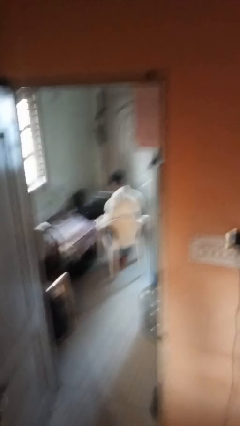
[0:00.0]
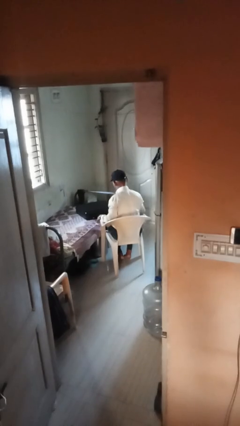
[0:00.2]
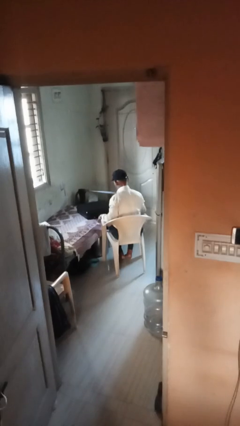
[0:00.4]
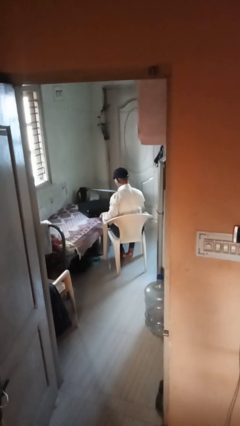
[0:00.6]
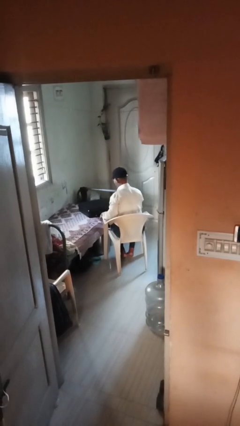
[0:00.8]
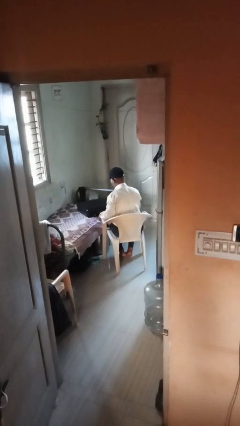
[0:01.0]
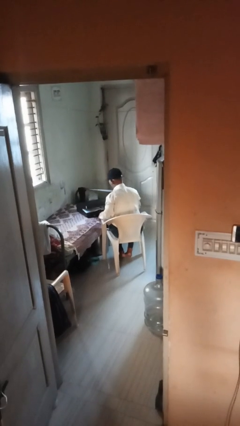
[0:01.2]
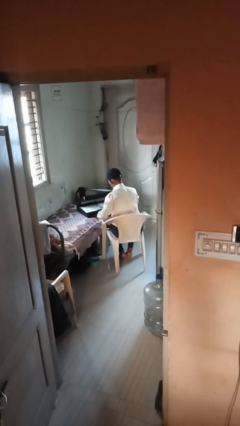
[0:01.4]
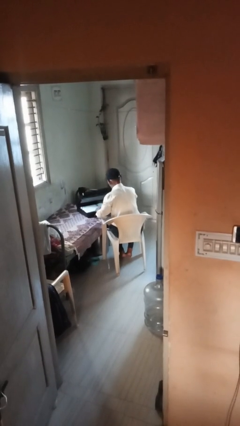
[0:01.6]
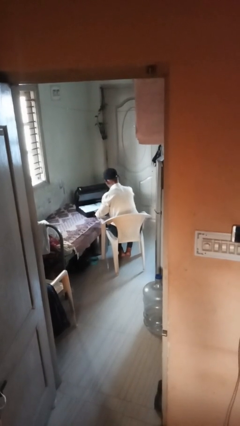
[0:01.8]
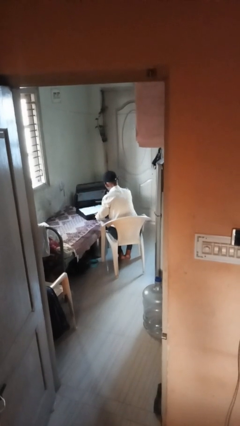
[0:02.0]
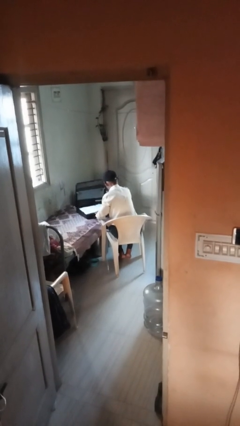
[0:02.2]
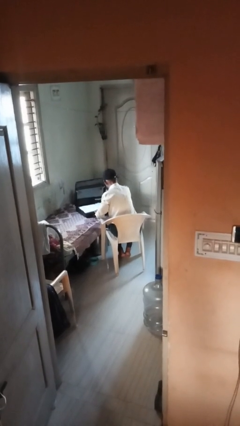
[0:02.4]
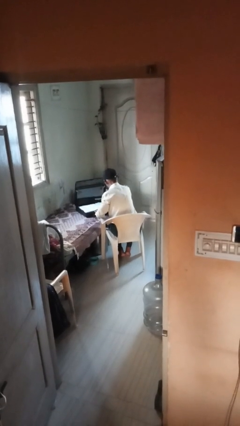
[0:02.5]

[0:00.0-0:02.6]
person opens suitcase

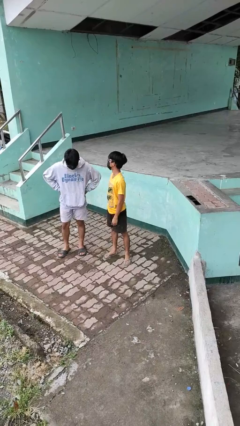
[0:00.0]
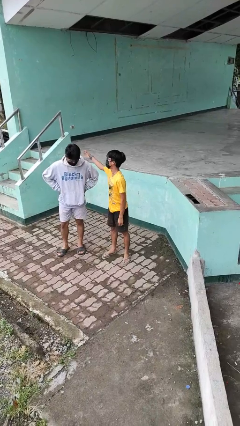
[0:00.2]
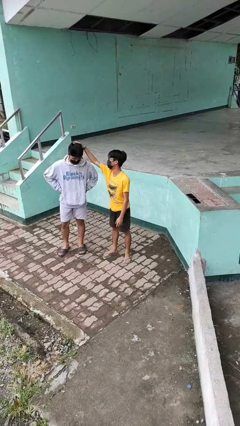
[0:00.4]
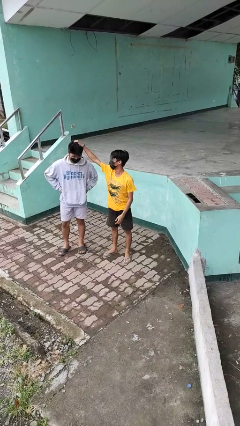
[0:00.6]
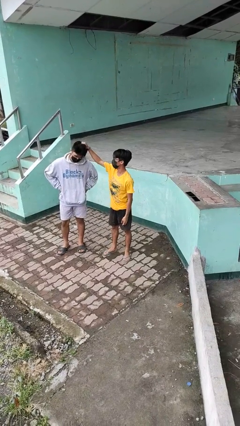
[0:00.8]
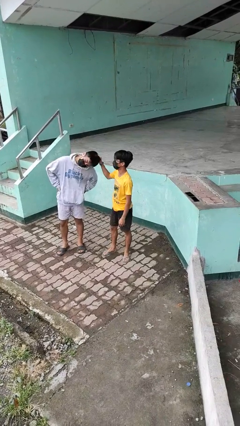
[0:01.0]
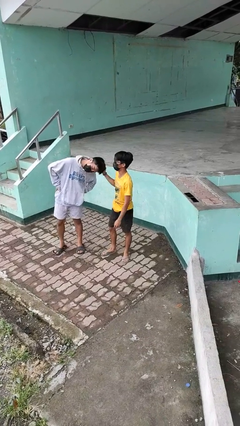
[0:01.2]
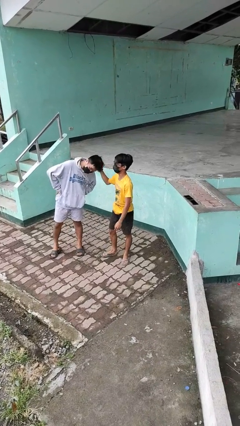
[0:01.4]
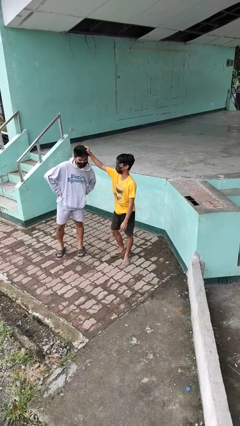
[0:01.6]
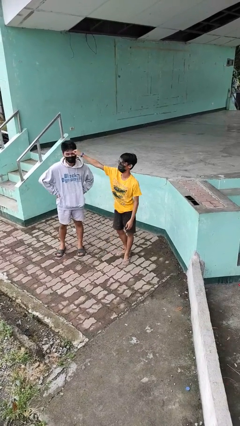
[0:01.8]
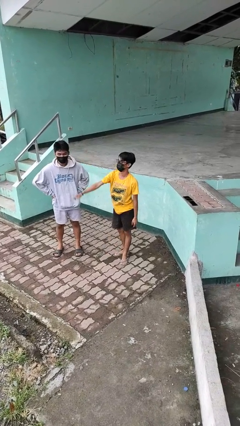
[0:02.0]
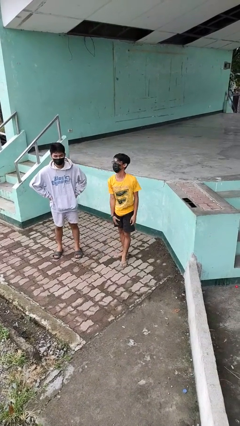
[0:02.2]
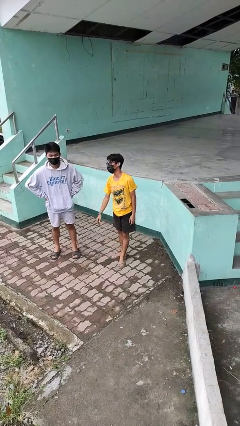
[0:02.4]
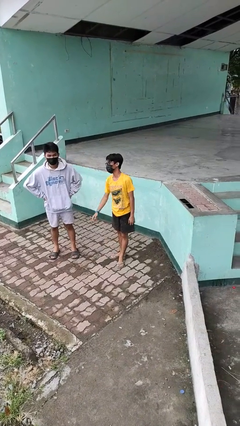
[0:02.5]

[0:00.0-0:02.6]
person grabs person by hair

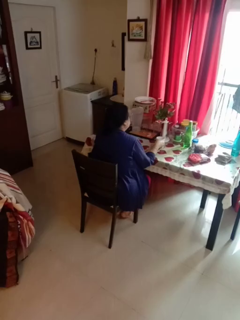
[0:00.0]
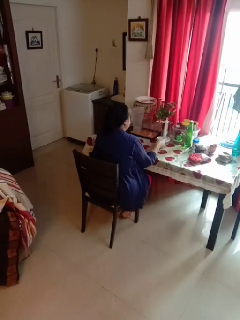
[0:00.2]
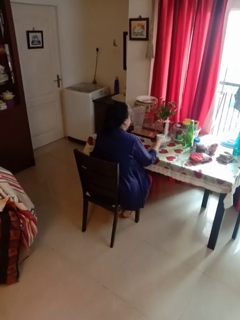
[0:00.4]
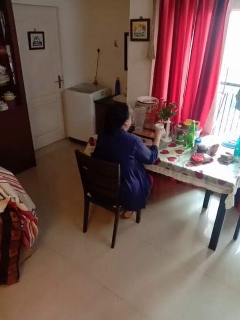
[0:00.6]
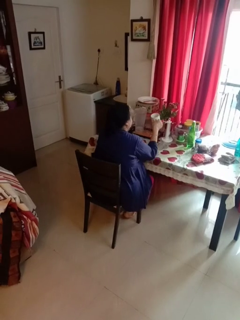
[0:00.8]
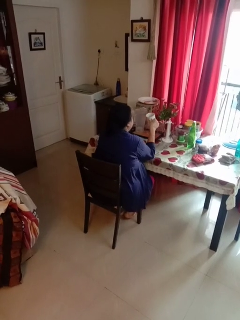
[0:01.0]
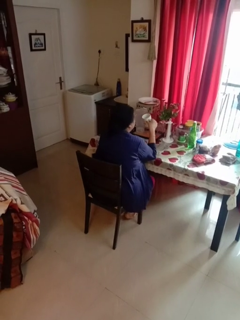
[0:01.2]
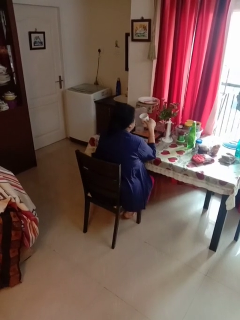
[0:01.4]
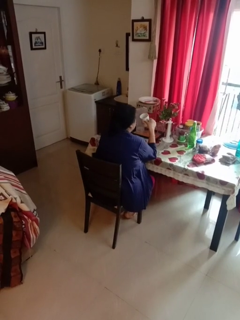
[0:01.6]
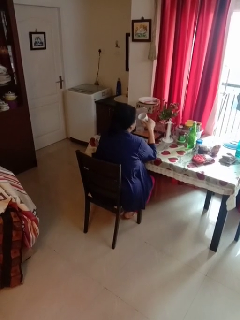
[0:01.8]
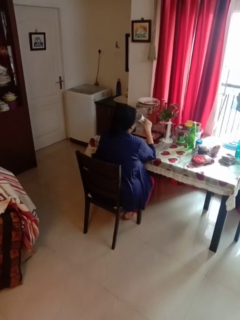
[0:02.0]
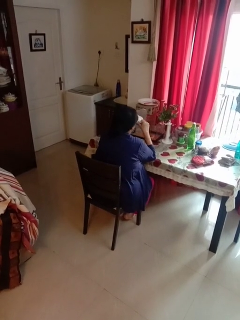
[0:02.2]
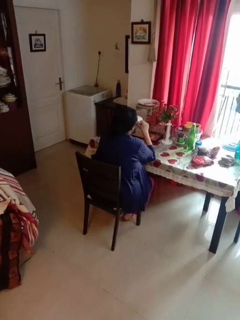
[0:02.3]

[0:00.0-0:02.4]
person picks up object from table

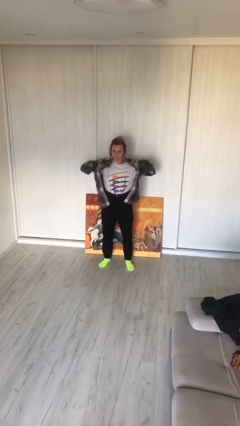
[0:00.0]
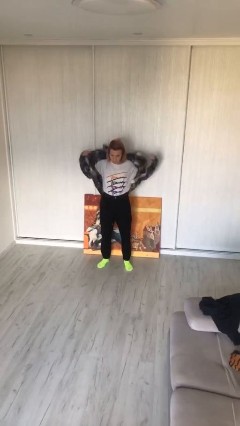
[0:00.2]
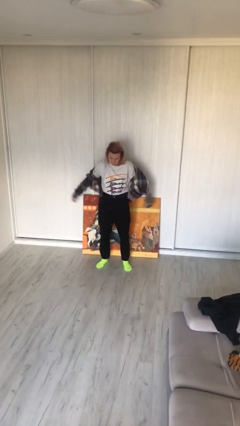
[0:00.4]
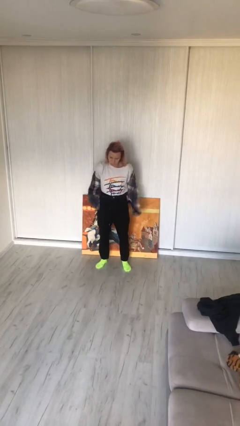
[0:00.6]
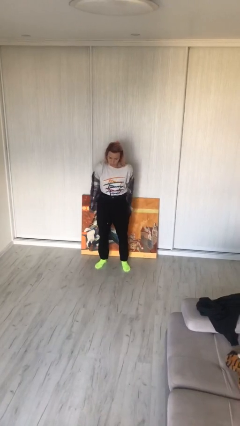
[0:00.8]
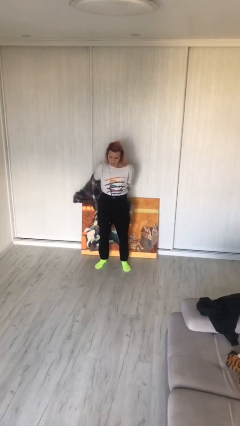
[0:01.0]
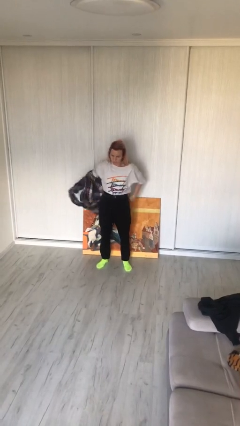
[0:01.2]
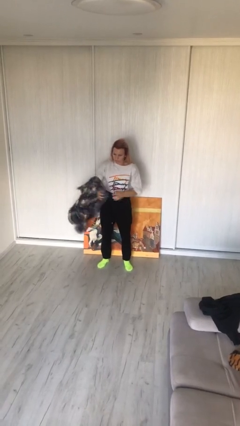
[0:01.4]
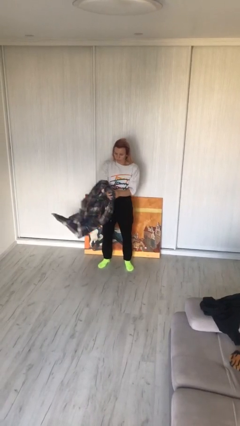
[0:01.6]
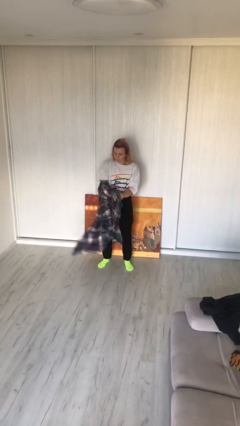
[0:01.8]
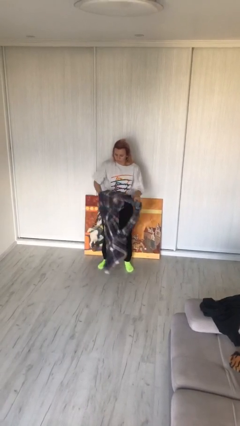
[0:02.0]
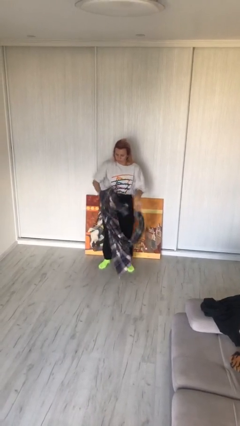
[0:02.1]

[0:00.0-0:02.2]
person takes off shirt

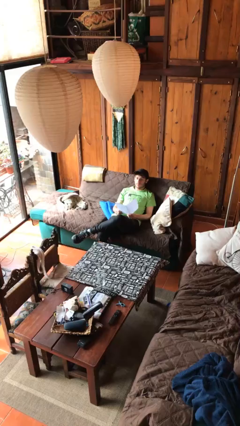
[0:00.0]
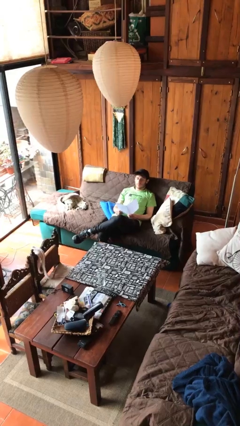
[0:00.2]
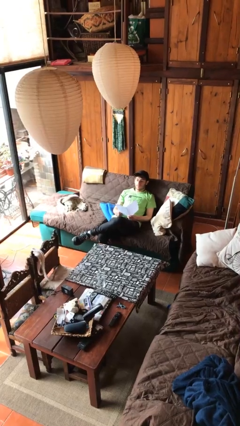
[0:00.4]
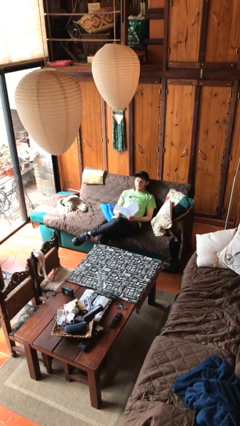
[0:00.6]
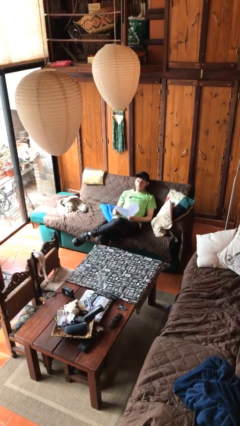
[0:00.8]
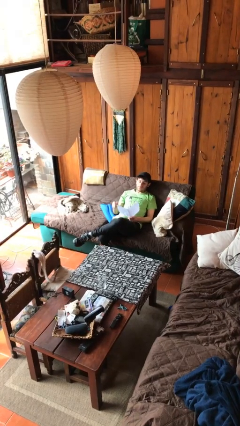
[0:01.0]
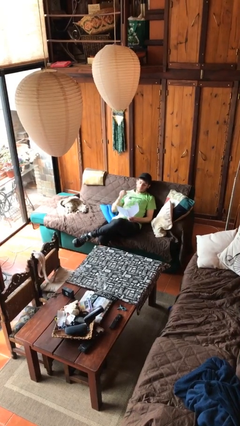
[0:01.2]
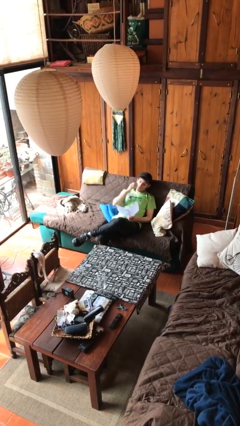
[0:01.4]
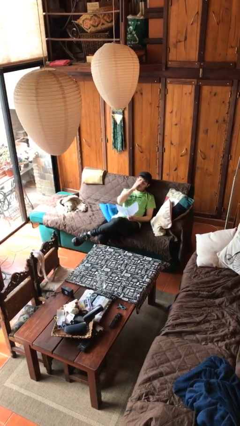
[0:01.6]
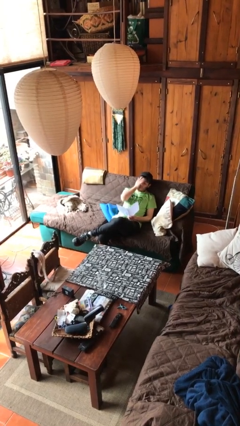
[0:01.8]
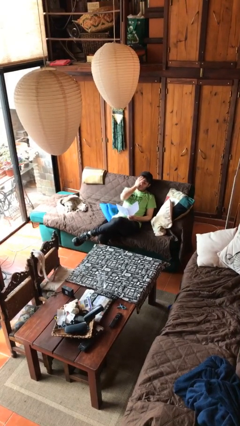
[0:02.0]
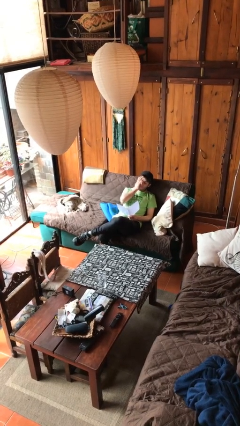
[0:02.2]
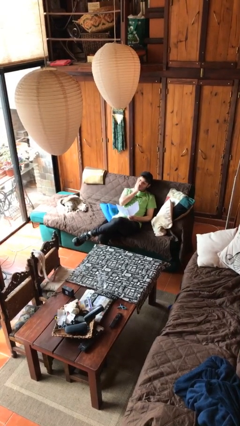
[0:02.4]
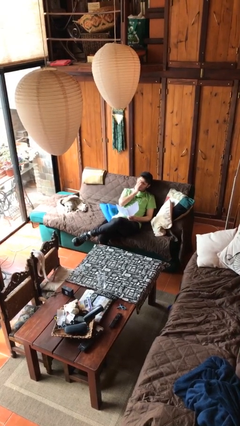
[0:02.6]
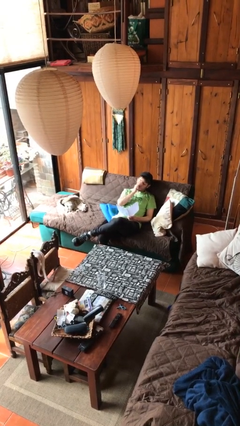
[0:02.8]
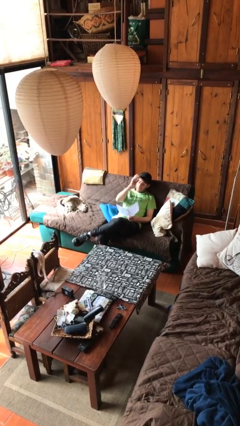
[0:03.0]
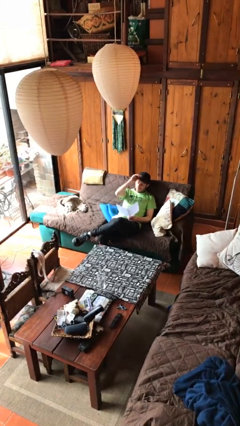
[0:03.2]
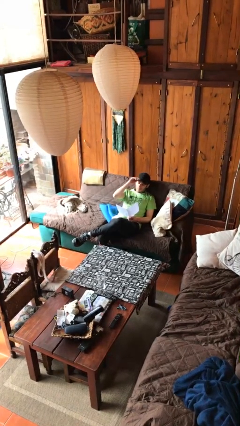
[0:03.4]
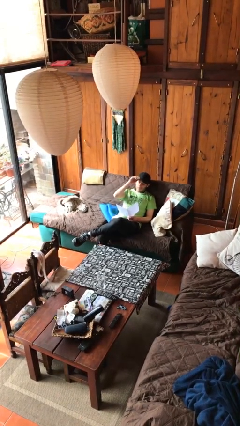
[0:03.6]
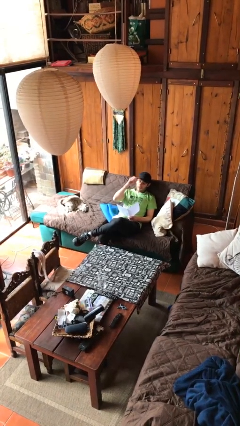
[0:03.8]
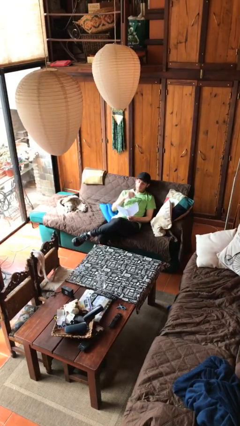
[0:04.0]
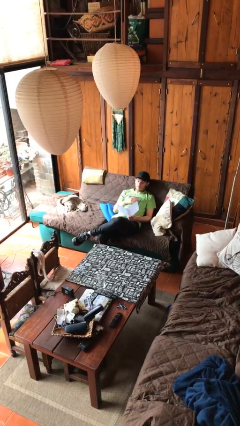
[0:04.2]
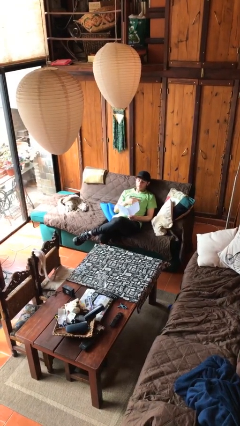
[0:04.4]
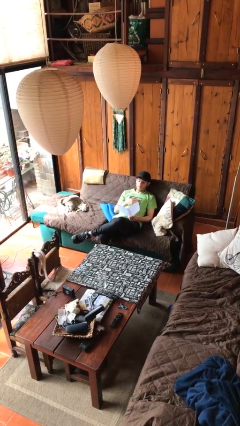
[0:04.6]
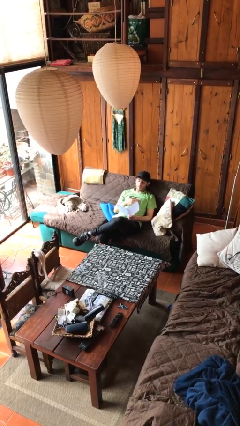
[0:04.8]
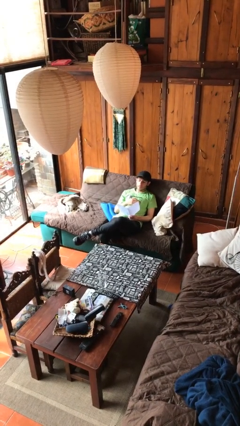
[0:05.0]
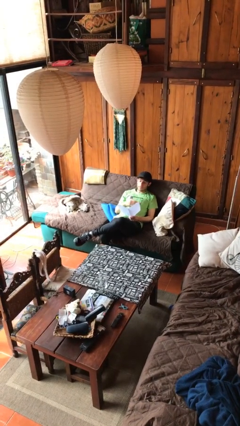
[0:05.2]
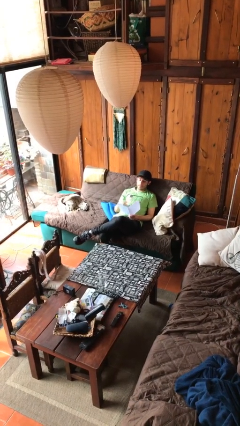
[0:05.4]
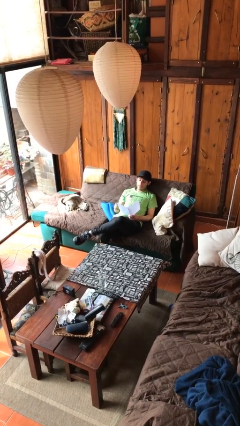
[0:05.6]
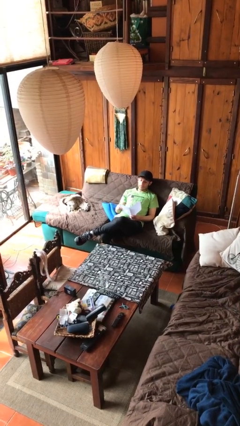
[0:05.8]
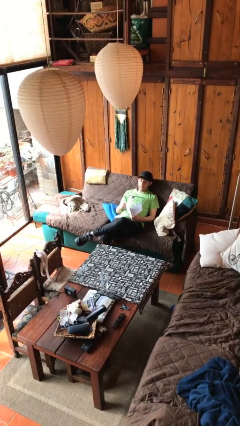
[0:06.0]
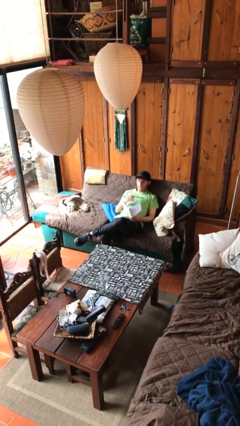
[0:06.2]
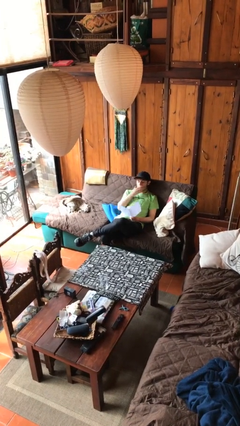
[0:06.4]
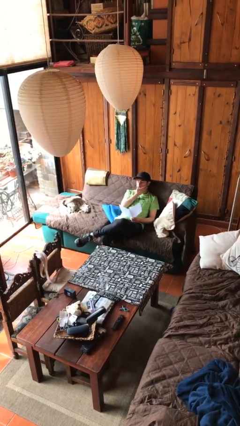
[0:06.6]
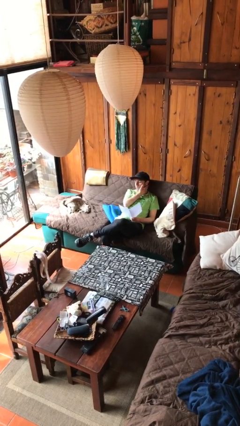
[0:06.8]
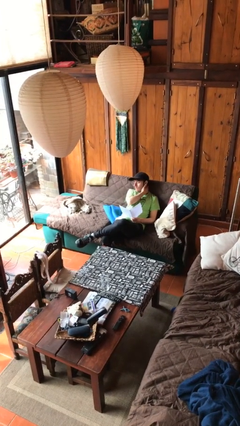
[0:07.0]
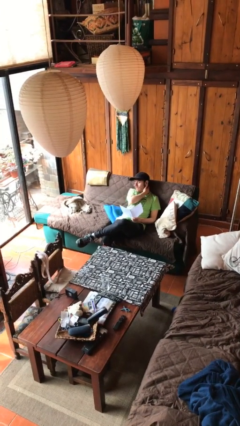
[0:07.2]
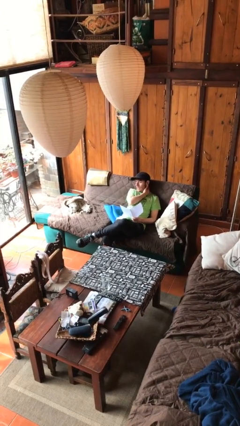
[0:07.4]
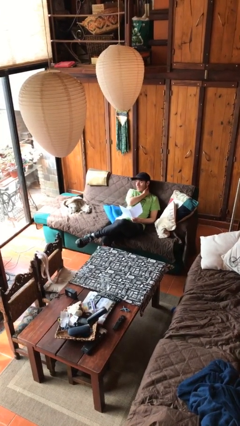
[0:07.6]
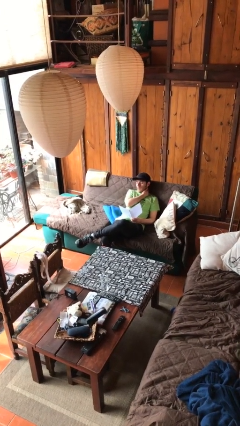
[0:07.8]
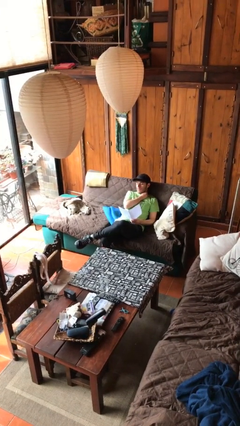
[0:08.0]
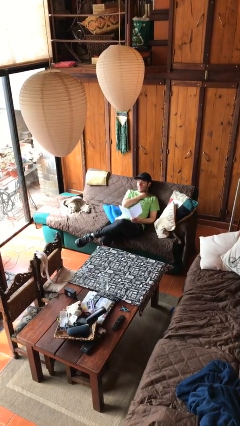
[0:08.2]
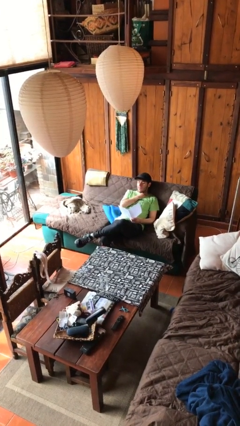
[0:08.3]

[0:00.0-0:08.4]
person reads document
